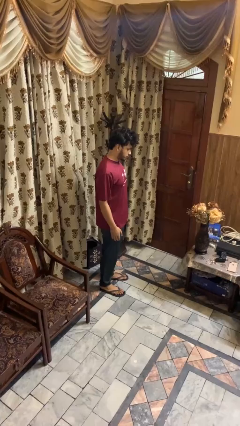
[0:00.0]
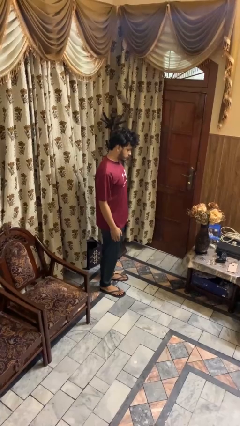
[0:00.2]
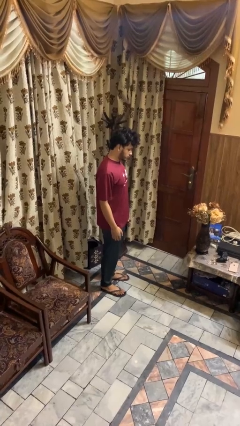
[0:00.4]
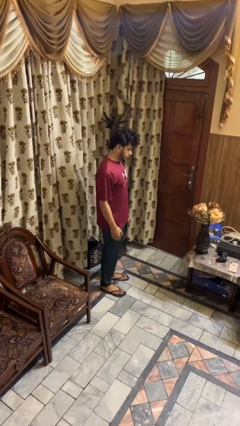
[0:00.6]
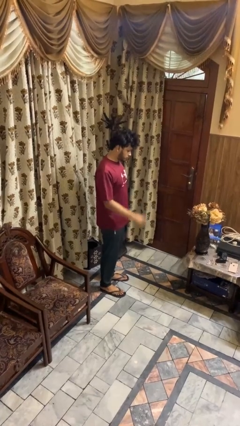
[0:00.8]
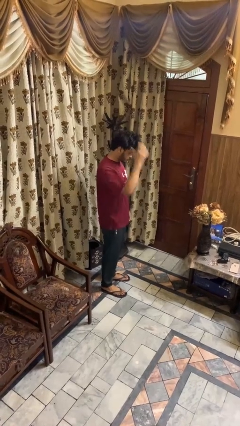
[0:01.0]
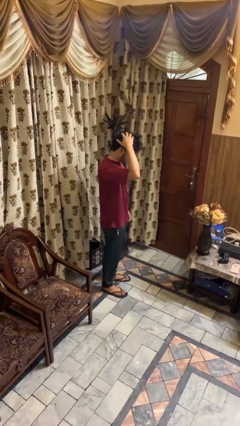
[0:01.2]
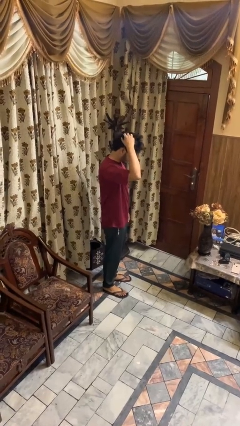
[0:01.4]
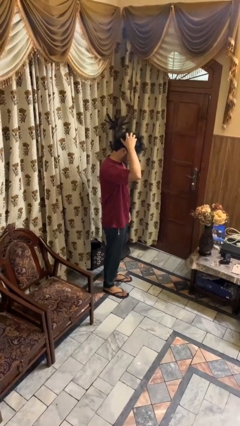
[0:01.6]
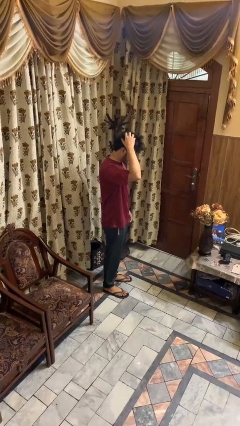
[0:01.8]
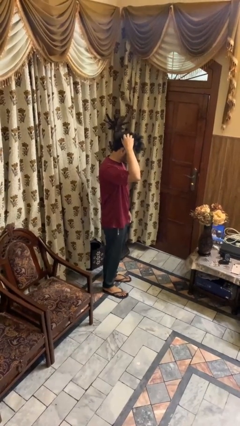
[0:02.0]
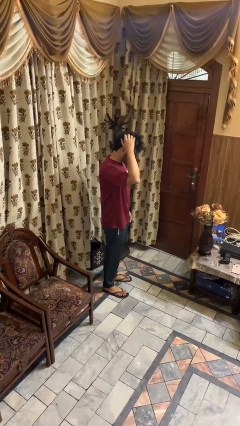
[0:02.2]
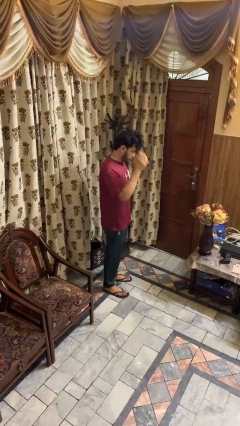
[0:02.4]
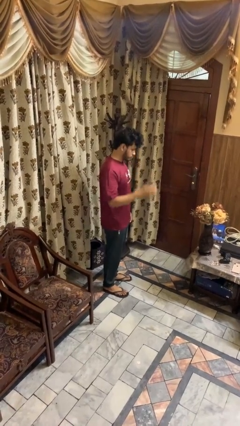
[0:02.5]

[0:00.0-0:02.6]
person scratches face

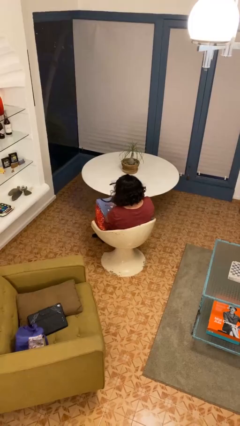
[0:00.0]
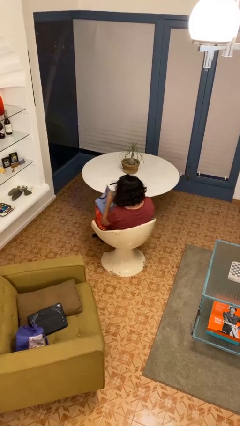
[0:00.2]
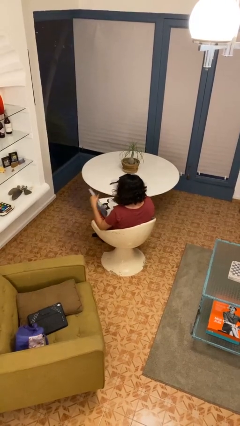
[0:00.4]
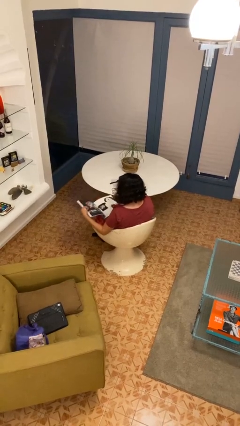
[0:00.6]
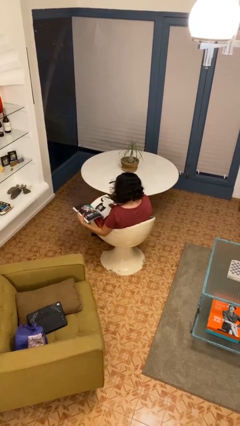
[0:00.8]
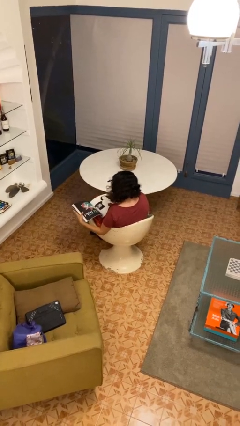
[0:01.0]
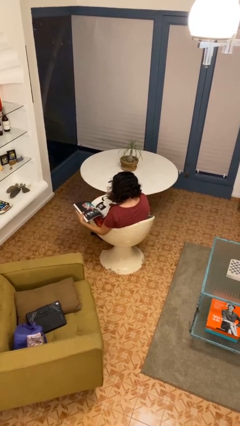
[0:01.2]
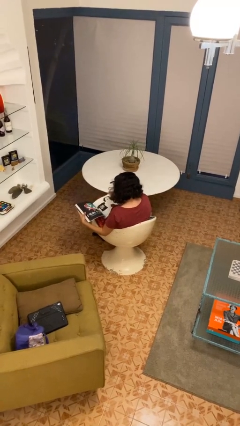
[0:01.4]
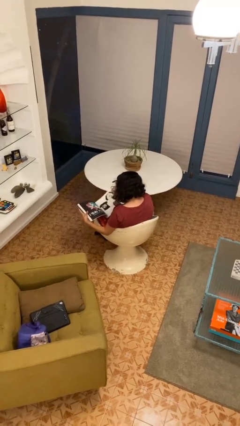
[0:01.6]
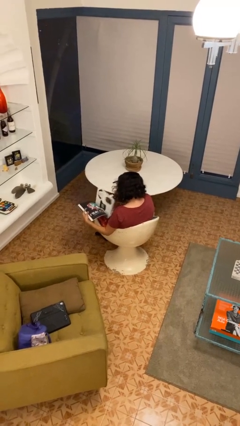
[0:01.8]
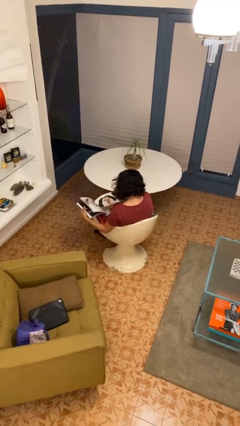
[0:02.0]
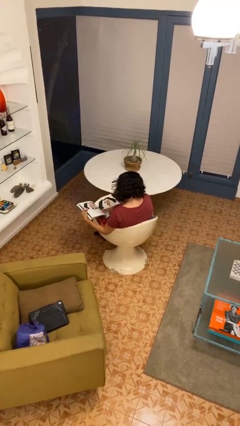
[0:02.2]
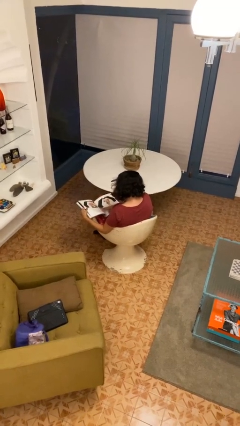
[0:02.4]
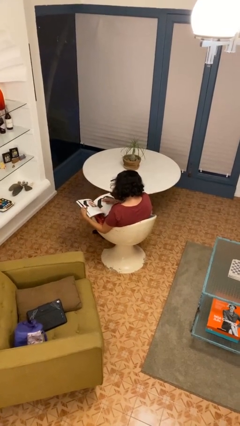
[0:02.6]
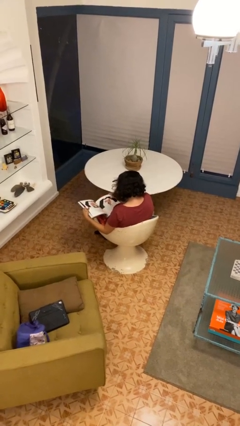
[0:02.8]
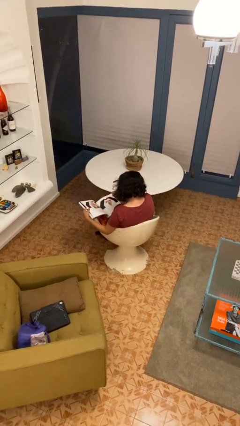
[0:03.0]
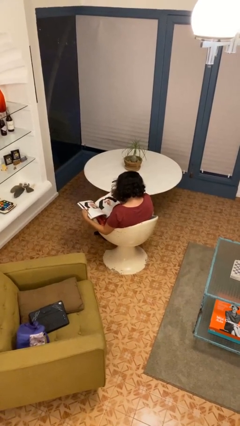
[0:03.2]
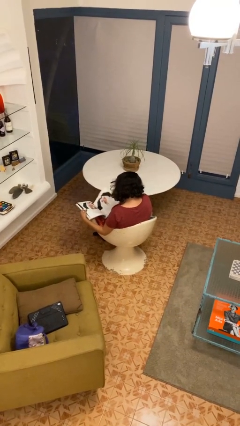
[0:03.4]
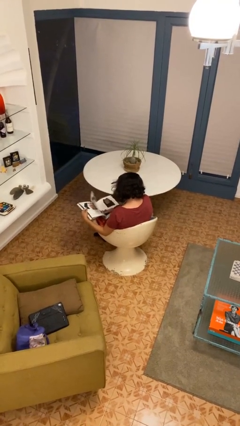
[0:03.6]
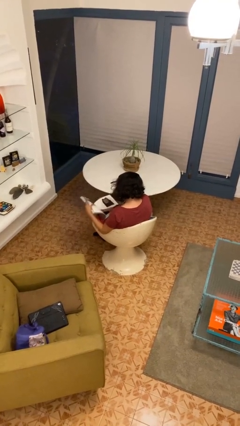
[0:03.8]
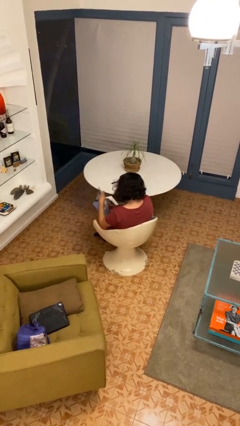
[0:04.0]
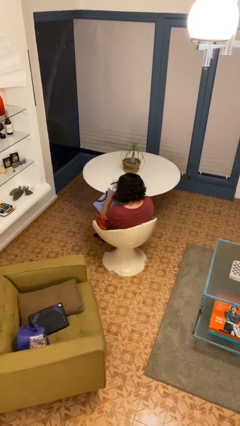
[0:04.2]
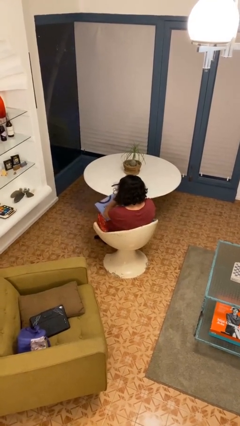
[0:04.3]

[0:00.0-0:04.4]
person reads book

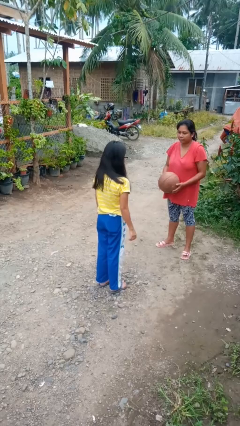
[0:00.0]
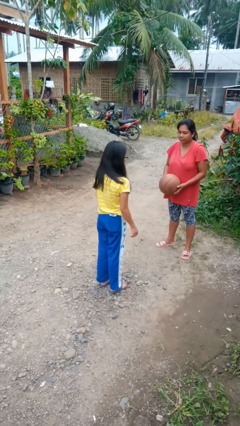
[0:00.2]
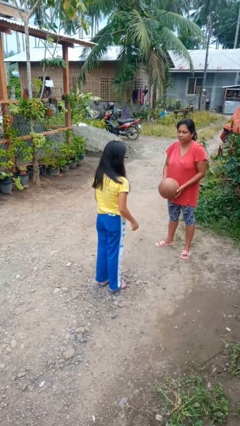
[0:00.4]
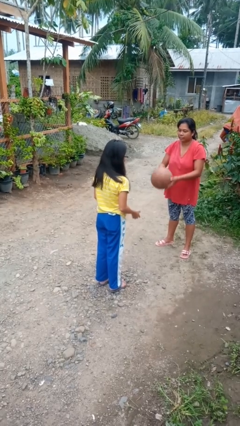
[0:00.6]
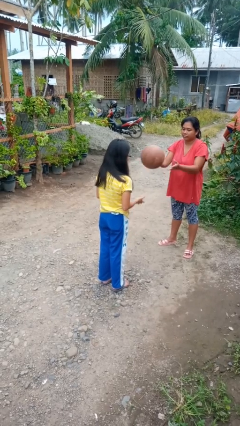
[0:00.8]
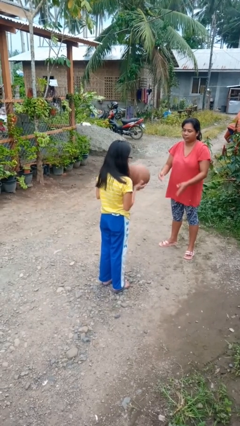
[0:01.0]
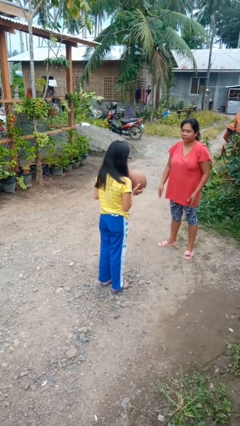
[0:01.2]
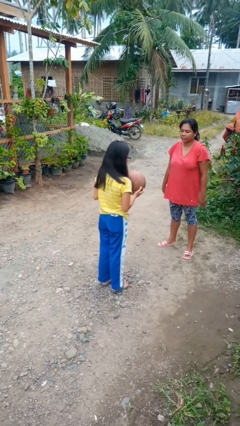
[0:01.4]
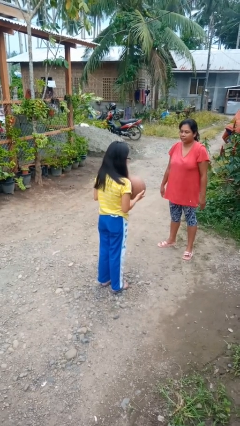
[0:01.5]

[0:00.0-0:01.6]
person catches object from person

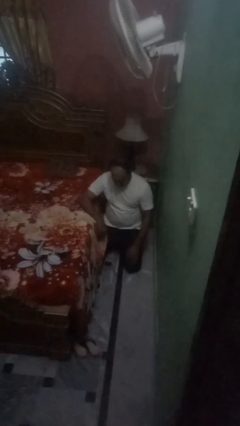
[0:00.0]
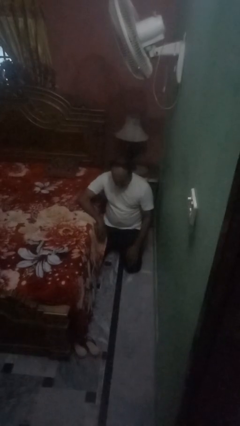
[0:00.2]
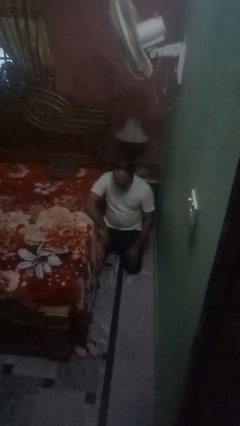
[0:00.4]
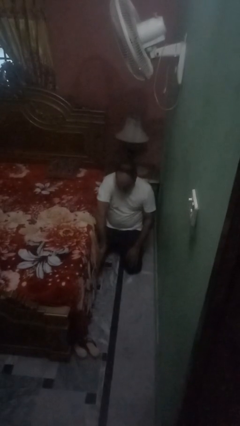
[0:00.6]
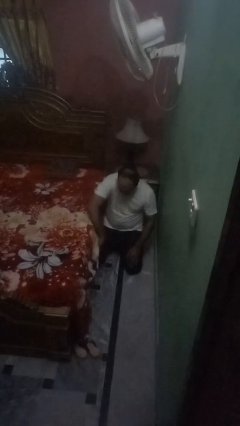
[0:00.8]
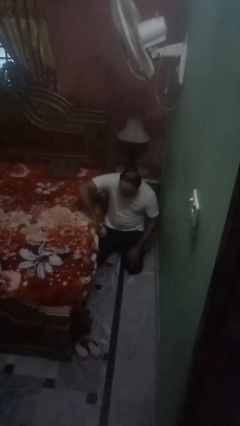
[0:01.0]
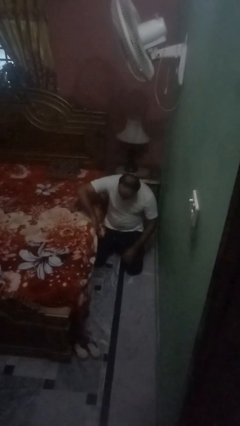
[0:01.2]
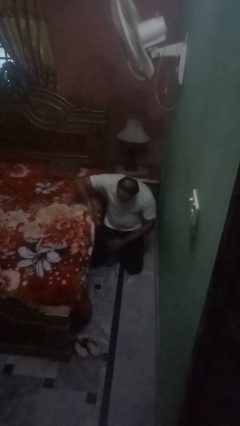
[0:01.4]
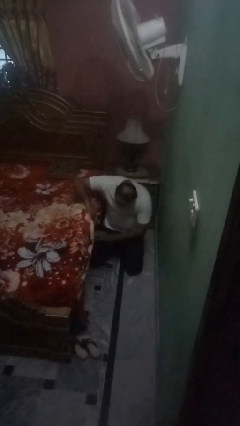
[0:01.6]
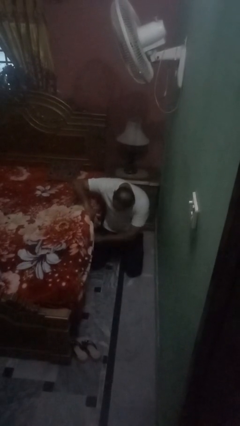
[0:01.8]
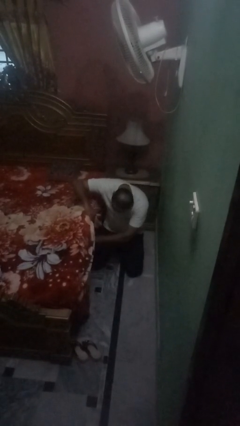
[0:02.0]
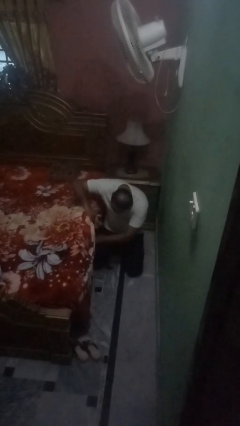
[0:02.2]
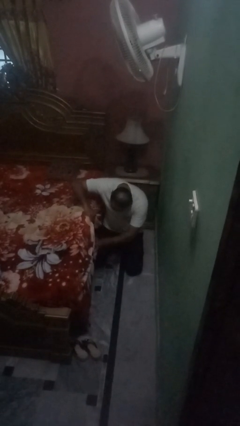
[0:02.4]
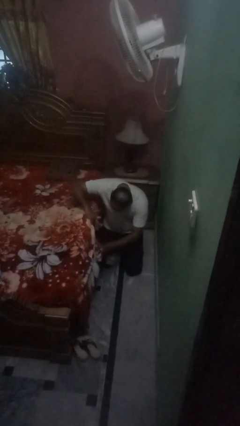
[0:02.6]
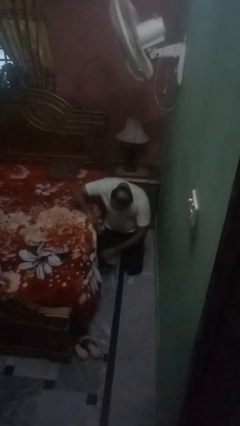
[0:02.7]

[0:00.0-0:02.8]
person searches under bed

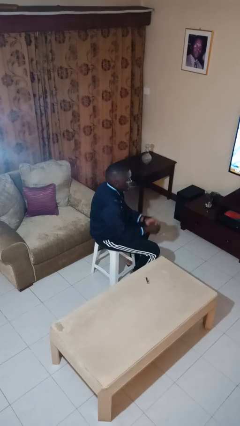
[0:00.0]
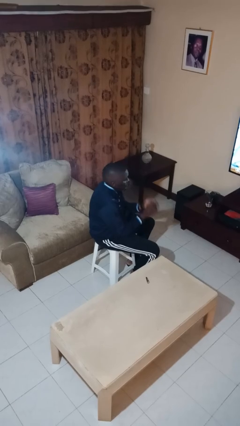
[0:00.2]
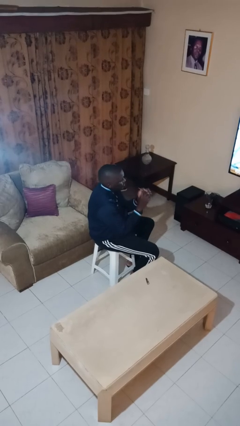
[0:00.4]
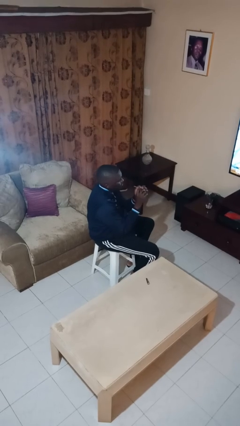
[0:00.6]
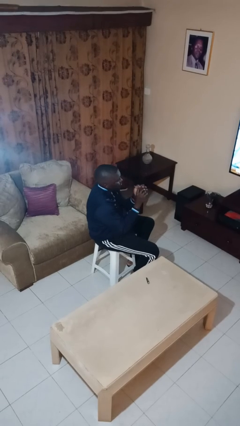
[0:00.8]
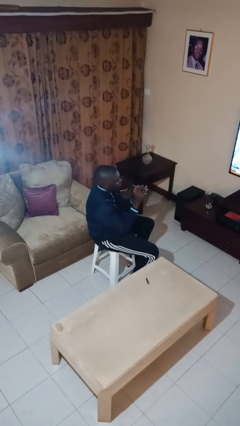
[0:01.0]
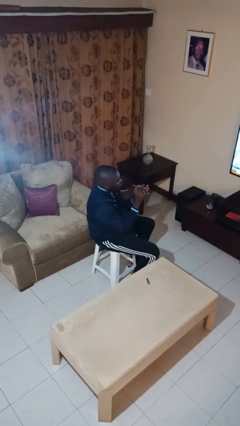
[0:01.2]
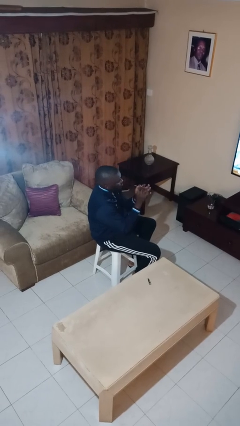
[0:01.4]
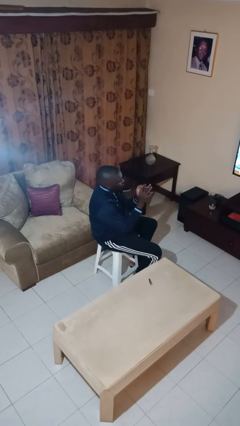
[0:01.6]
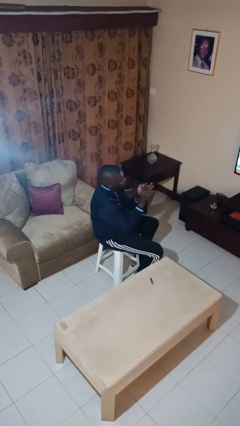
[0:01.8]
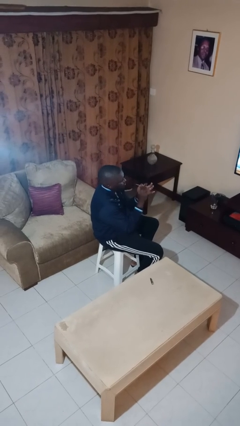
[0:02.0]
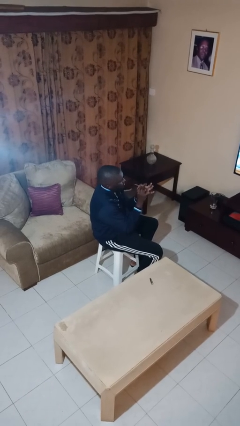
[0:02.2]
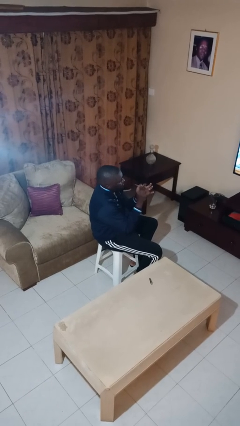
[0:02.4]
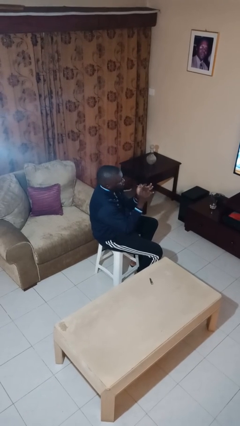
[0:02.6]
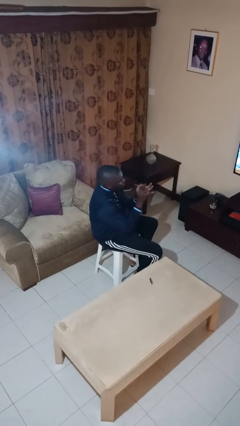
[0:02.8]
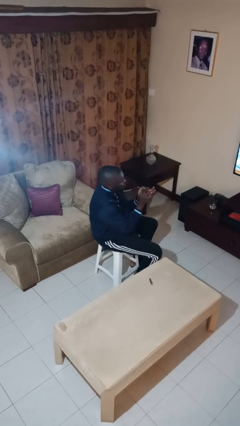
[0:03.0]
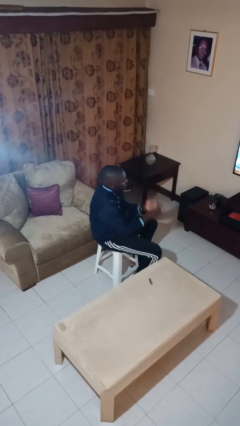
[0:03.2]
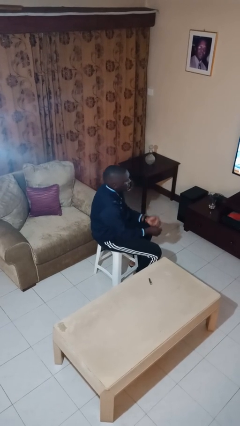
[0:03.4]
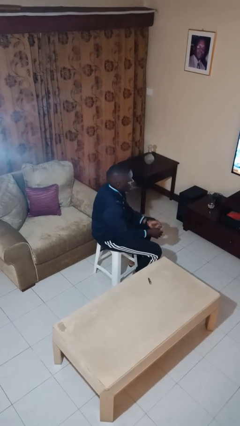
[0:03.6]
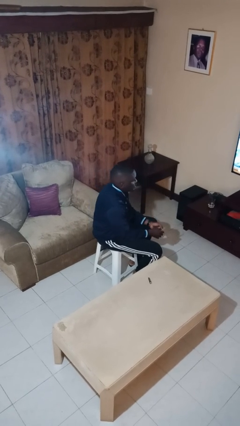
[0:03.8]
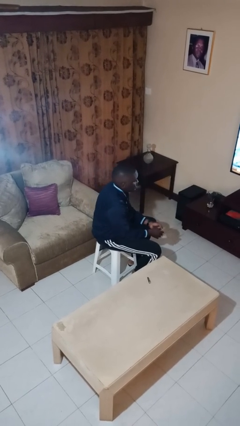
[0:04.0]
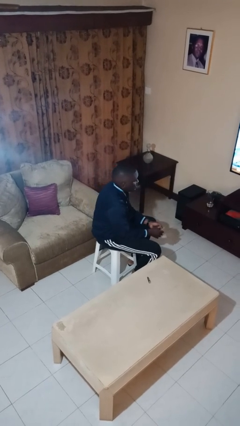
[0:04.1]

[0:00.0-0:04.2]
person files fingernails

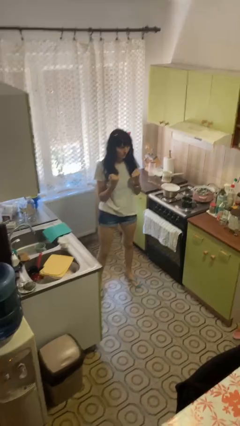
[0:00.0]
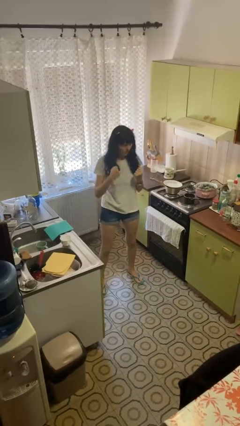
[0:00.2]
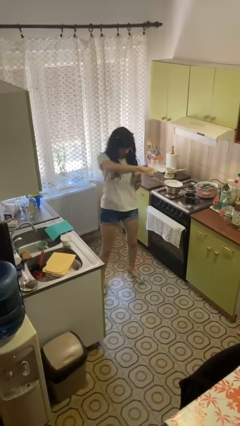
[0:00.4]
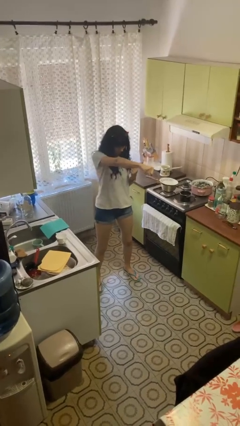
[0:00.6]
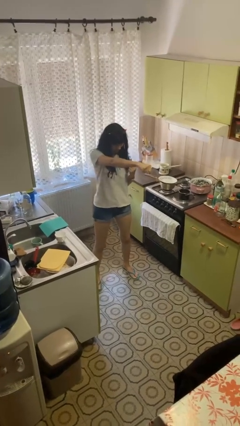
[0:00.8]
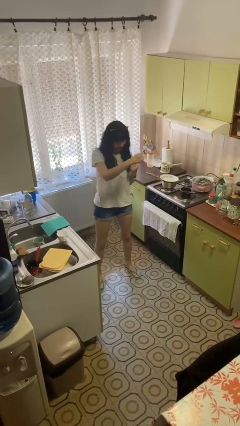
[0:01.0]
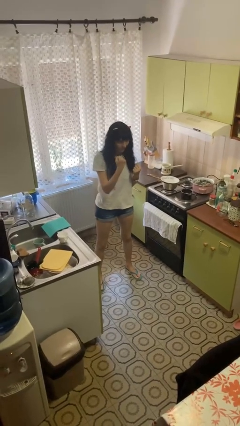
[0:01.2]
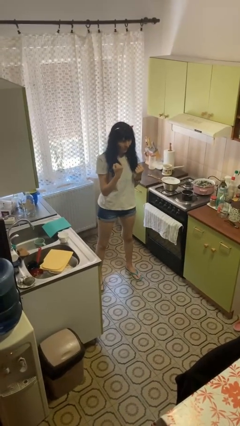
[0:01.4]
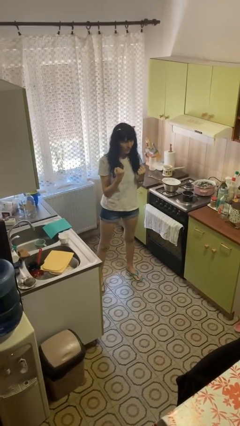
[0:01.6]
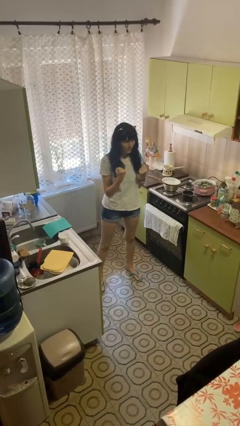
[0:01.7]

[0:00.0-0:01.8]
person punches
